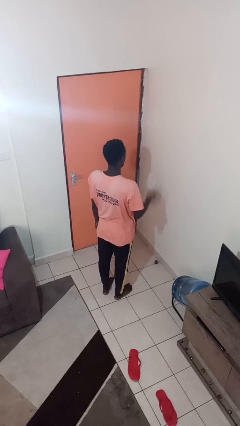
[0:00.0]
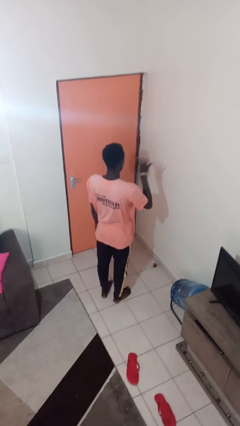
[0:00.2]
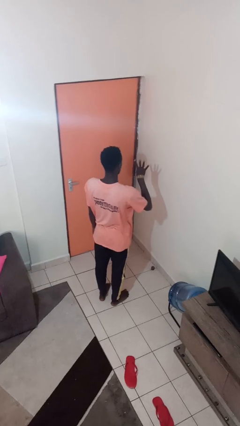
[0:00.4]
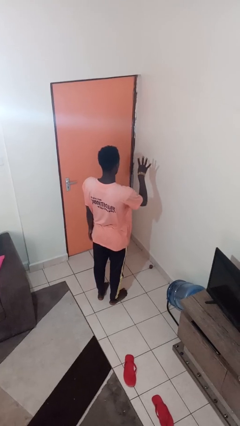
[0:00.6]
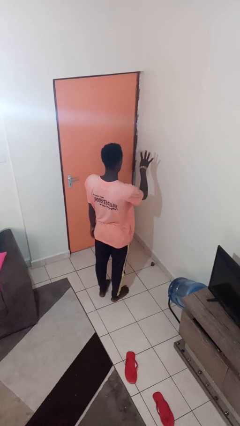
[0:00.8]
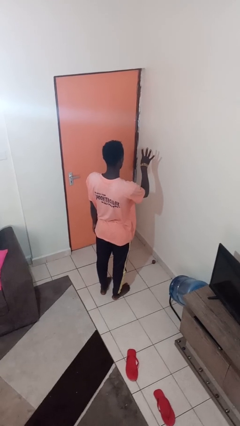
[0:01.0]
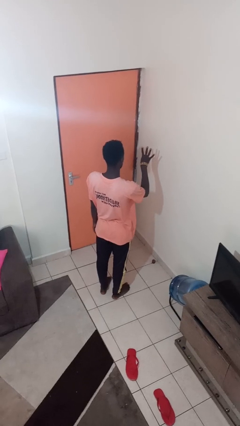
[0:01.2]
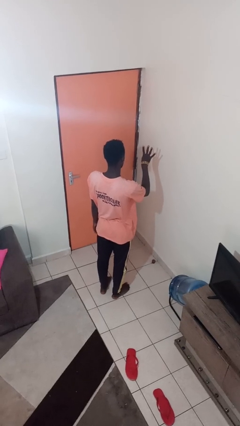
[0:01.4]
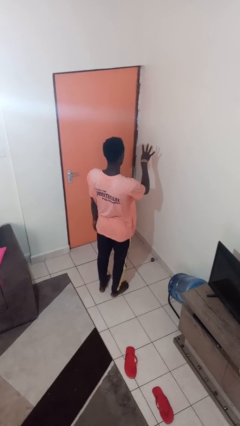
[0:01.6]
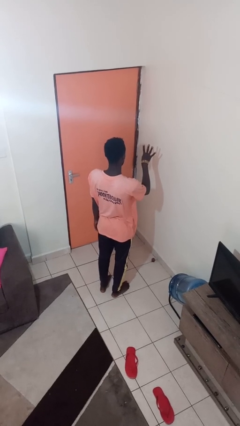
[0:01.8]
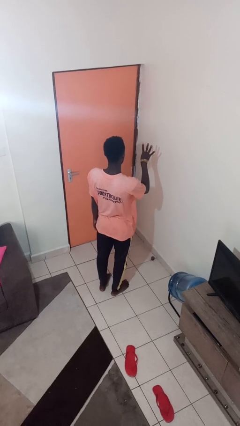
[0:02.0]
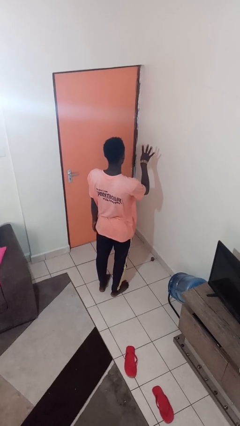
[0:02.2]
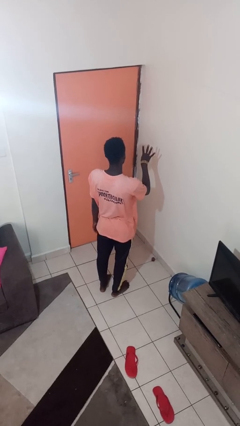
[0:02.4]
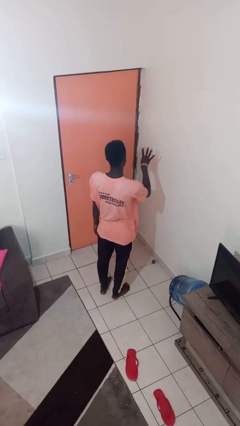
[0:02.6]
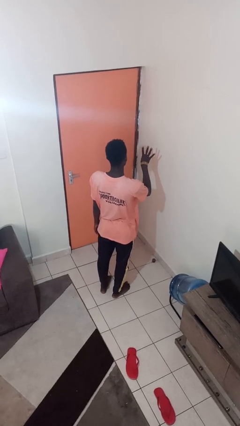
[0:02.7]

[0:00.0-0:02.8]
person gestures number four

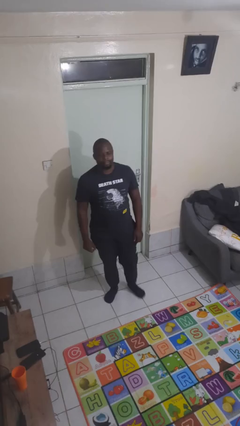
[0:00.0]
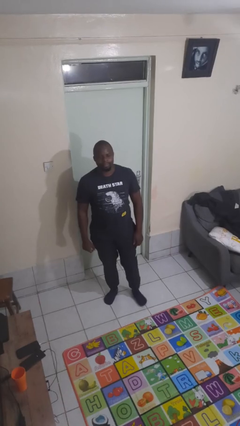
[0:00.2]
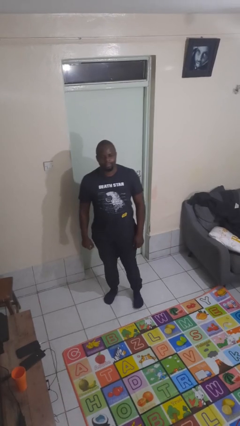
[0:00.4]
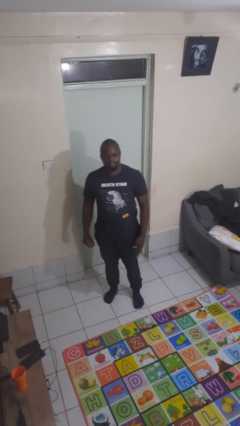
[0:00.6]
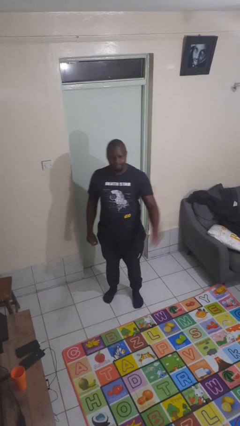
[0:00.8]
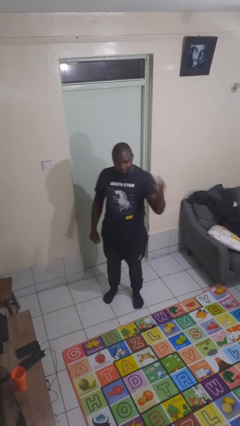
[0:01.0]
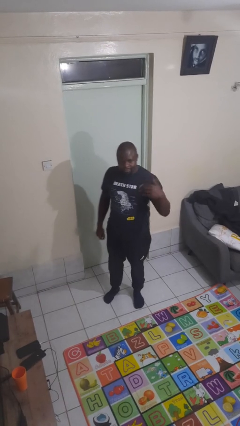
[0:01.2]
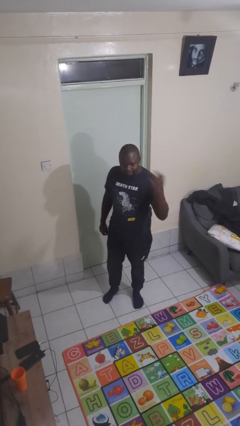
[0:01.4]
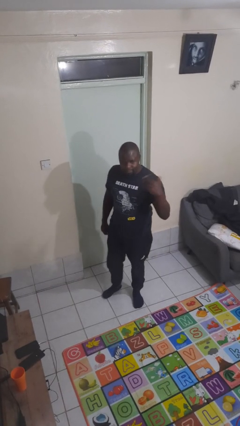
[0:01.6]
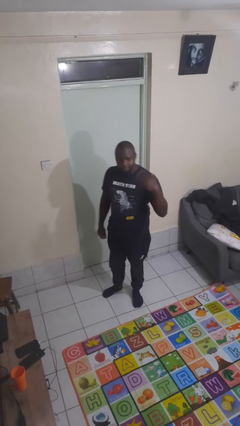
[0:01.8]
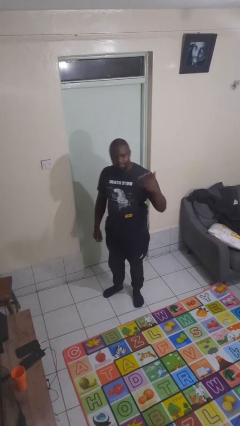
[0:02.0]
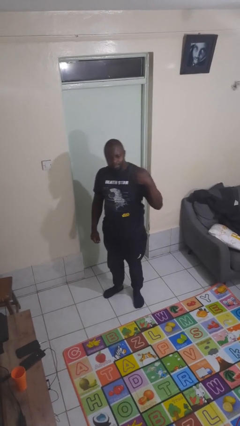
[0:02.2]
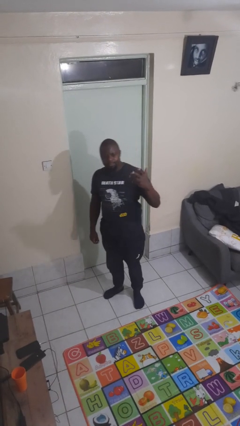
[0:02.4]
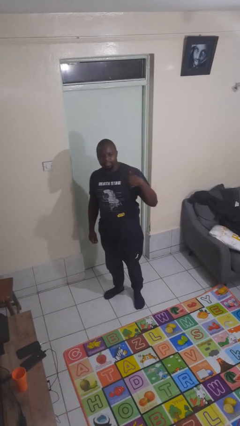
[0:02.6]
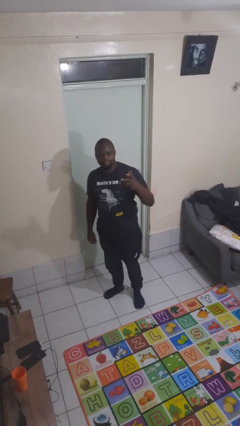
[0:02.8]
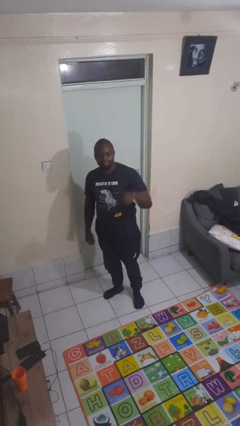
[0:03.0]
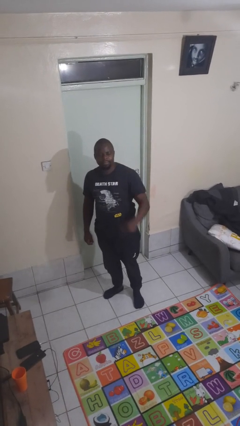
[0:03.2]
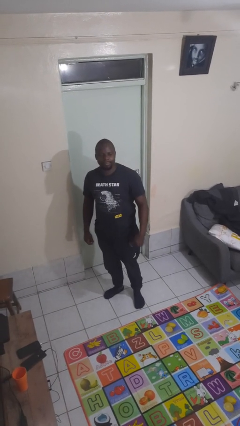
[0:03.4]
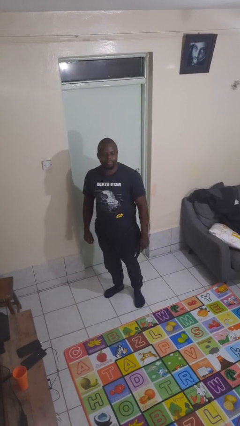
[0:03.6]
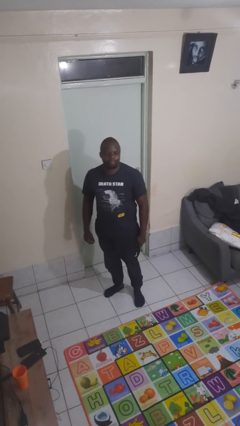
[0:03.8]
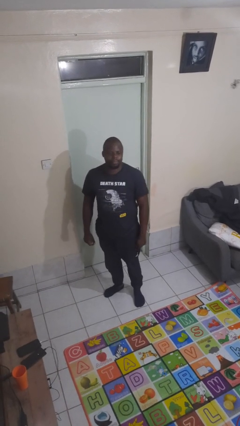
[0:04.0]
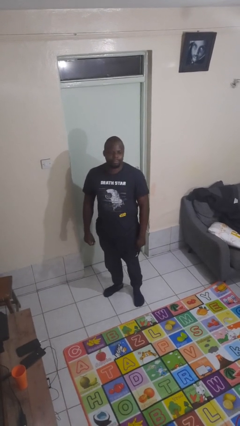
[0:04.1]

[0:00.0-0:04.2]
person gestures come here

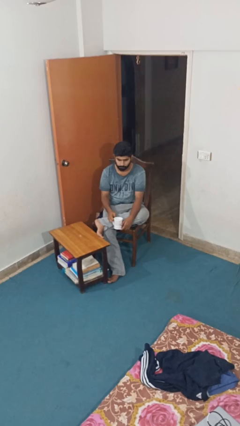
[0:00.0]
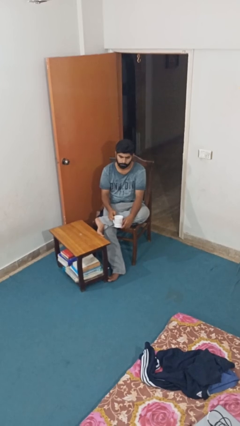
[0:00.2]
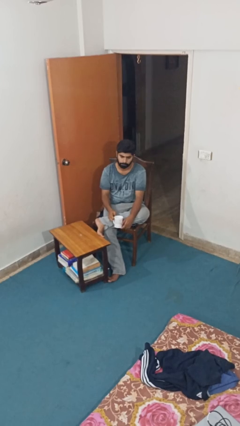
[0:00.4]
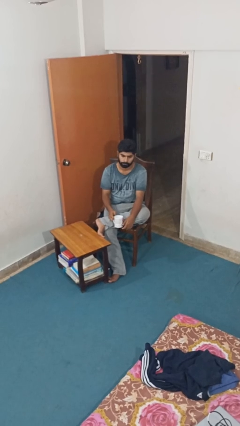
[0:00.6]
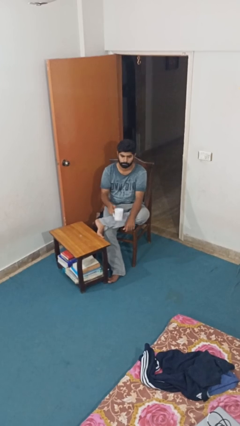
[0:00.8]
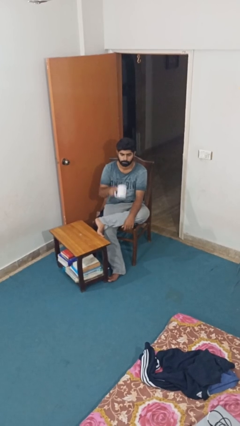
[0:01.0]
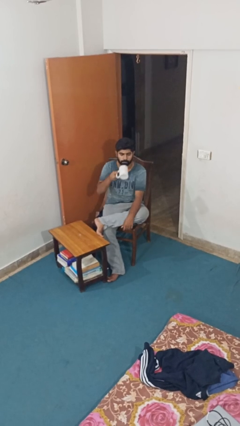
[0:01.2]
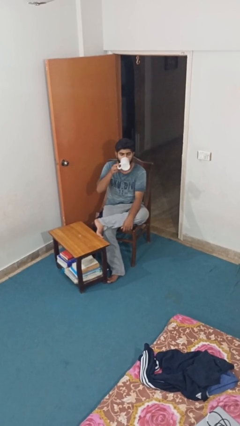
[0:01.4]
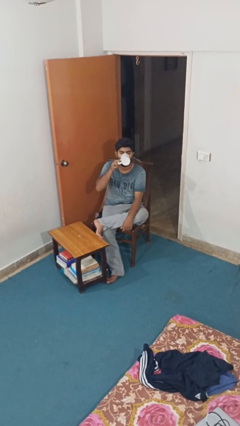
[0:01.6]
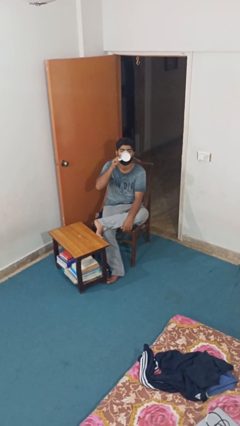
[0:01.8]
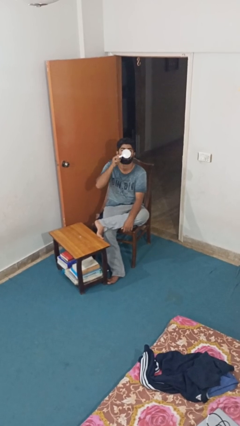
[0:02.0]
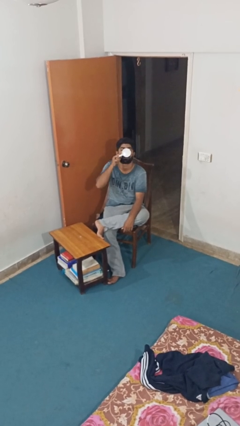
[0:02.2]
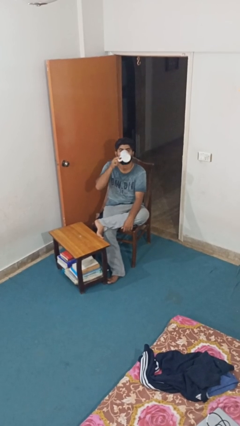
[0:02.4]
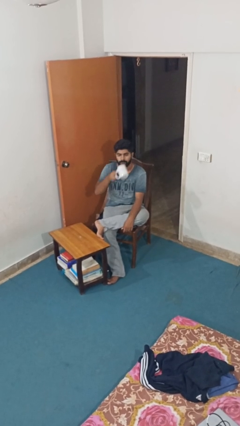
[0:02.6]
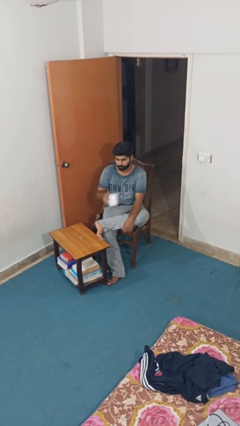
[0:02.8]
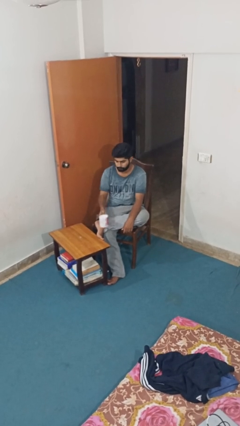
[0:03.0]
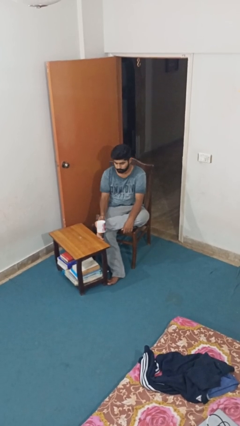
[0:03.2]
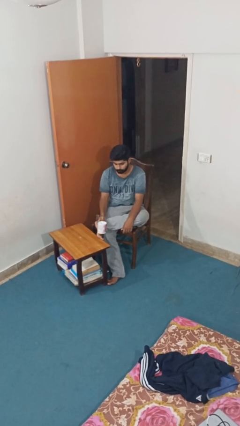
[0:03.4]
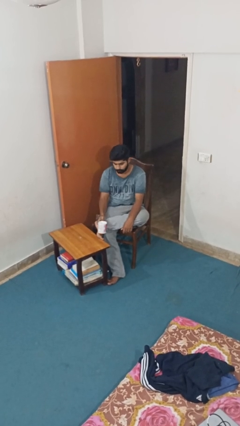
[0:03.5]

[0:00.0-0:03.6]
person drinks from mug

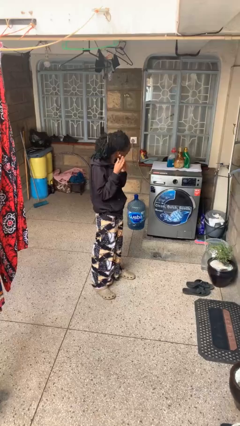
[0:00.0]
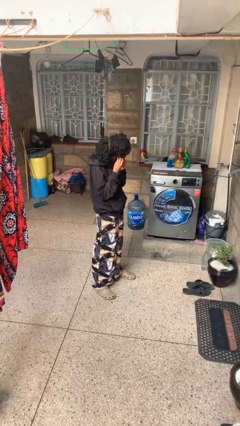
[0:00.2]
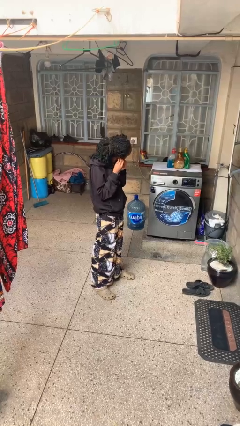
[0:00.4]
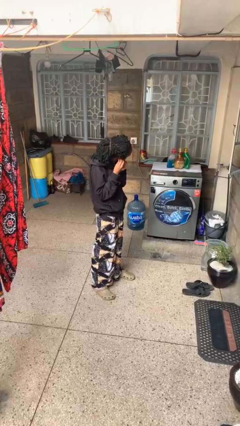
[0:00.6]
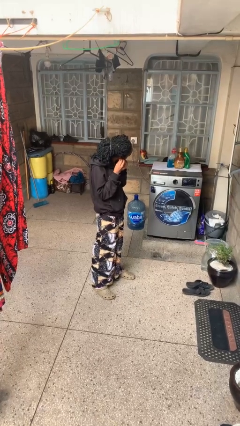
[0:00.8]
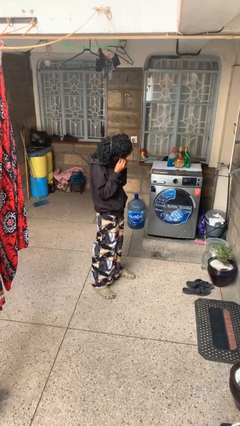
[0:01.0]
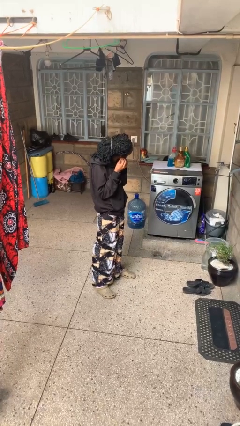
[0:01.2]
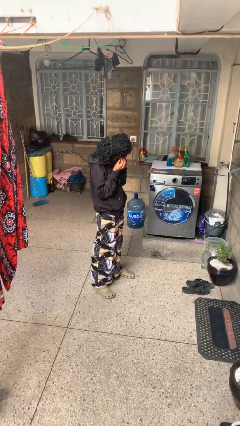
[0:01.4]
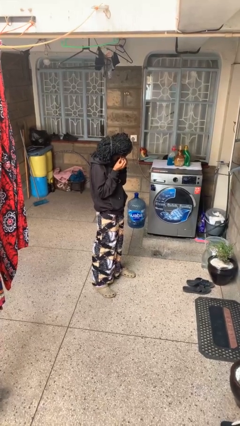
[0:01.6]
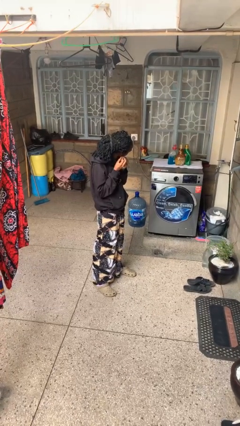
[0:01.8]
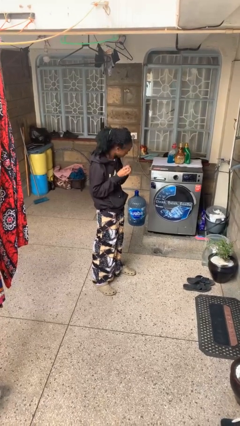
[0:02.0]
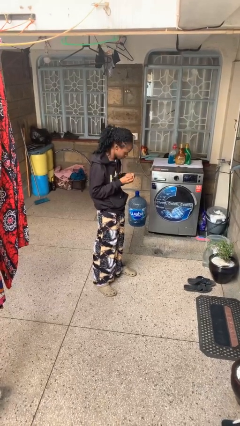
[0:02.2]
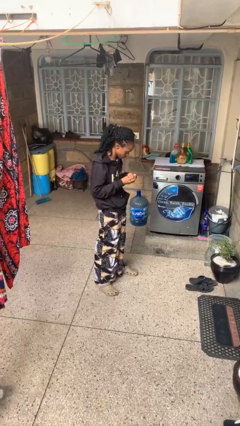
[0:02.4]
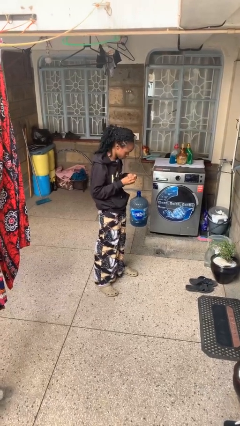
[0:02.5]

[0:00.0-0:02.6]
person takes off earrings

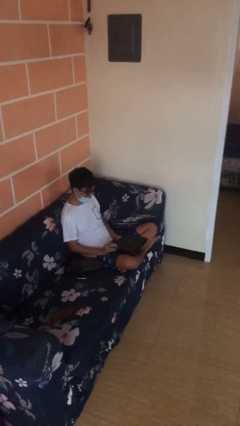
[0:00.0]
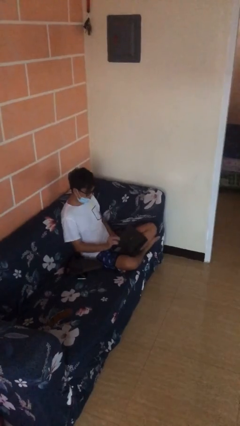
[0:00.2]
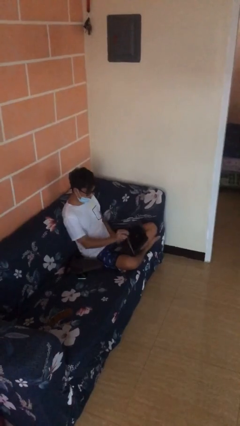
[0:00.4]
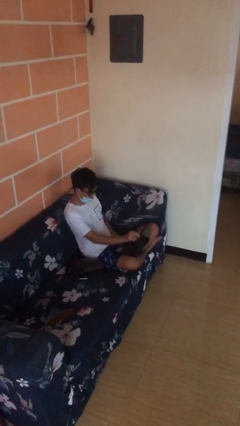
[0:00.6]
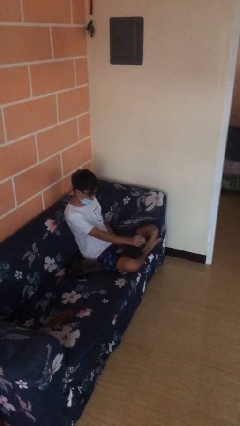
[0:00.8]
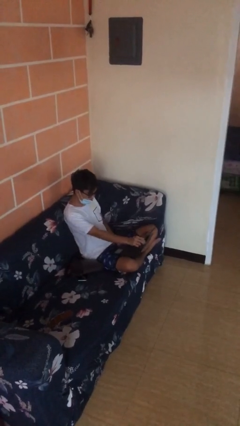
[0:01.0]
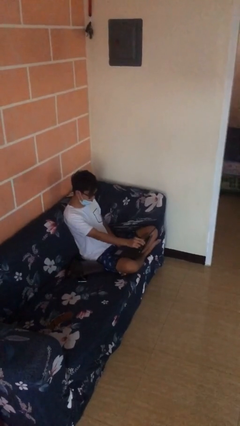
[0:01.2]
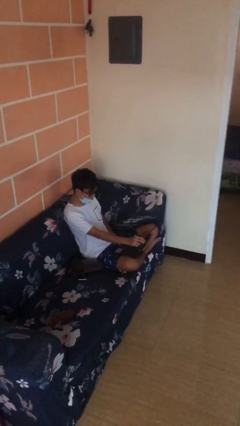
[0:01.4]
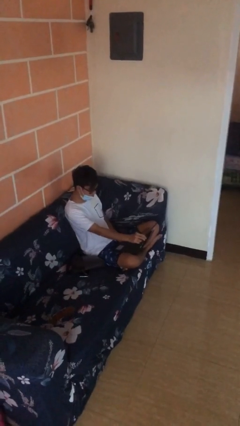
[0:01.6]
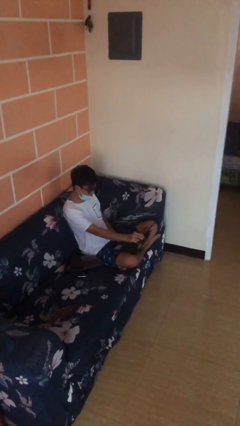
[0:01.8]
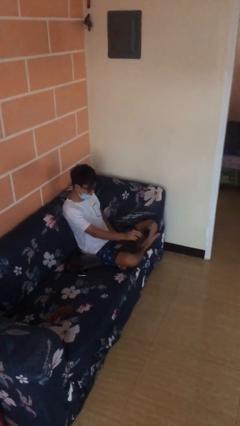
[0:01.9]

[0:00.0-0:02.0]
person interacts with laptop

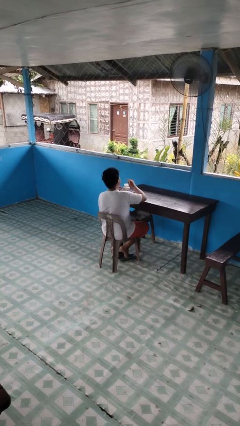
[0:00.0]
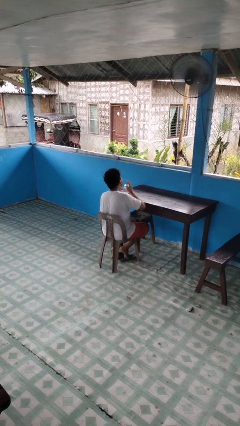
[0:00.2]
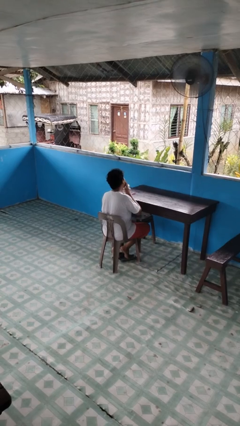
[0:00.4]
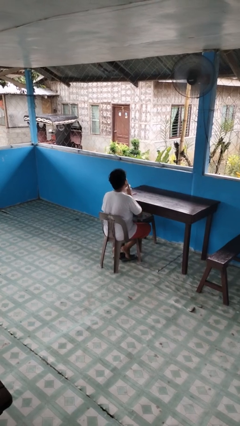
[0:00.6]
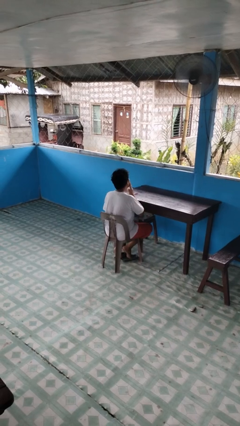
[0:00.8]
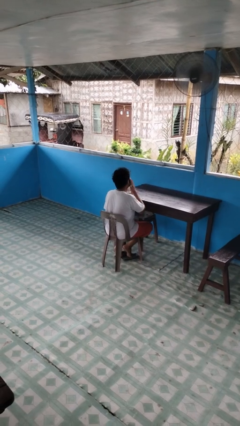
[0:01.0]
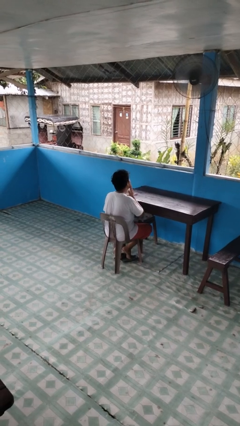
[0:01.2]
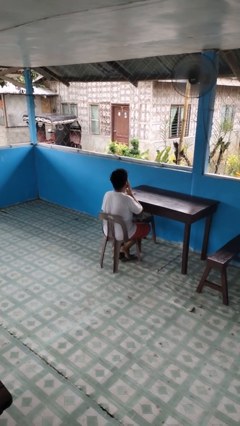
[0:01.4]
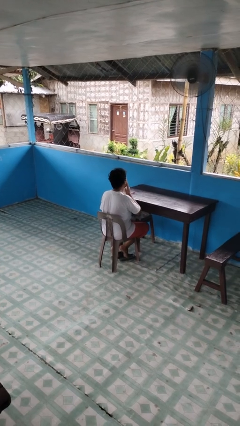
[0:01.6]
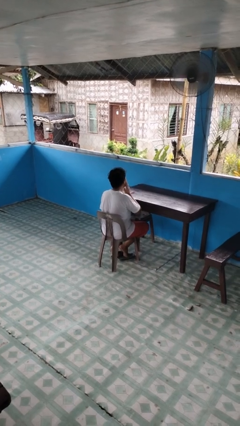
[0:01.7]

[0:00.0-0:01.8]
person applies shaving cream

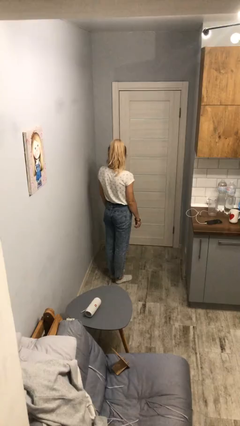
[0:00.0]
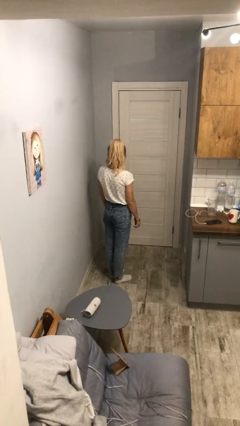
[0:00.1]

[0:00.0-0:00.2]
person kneels
